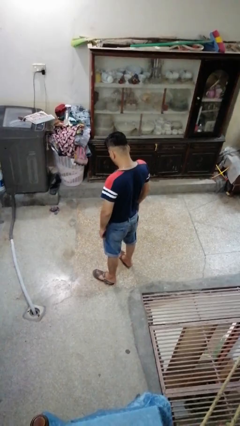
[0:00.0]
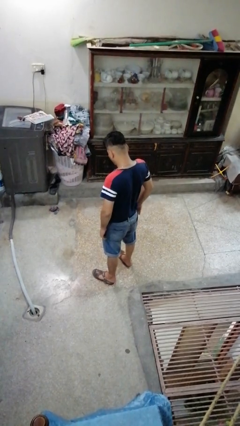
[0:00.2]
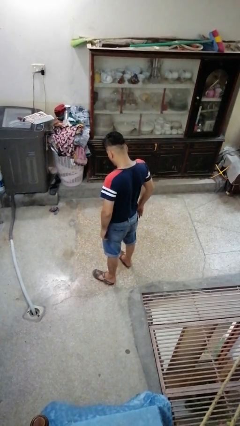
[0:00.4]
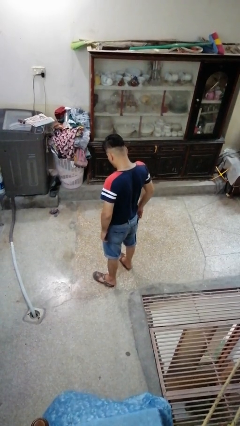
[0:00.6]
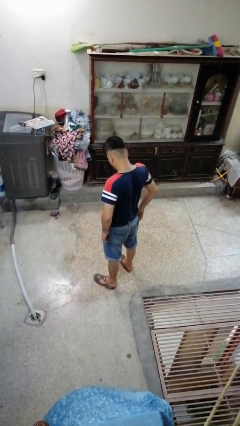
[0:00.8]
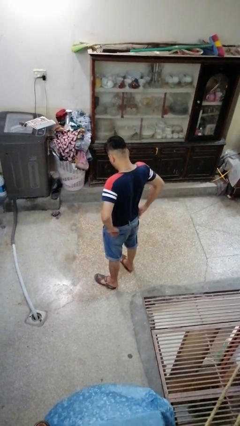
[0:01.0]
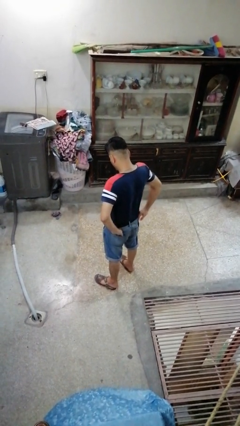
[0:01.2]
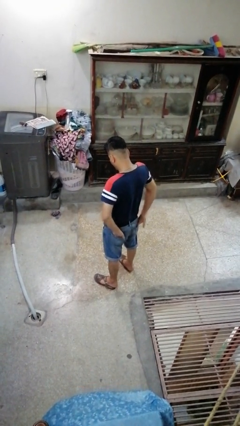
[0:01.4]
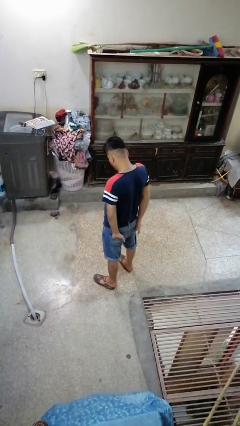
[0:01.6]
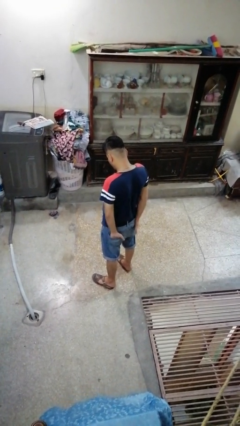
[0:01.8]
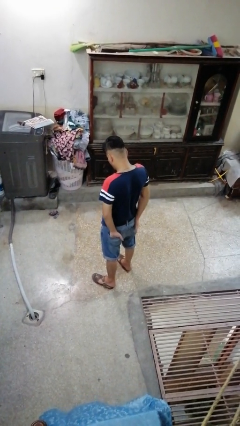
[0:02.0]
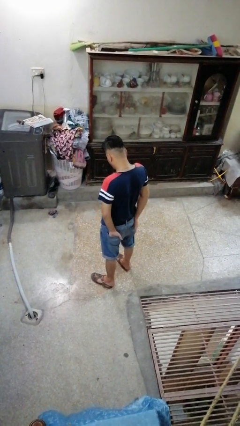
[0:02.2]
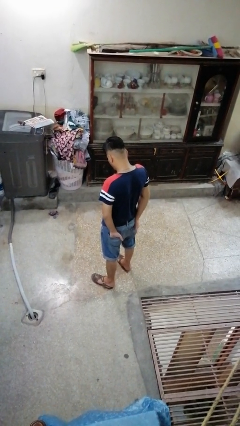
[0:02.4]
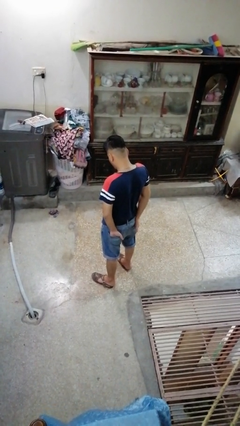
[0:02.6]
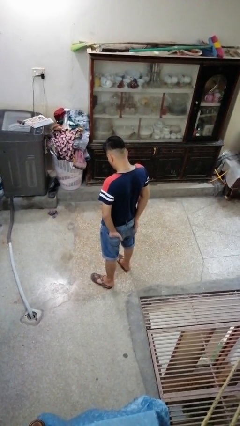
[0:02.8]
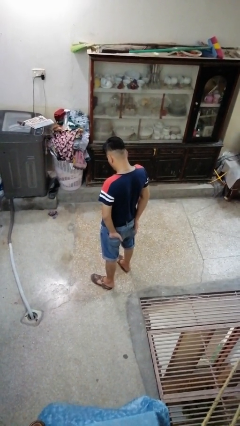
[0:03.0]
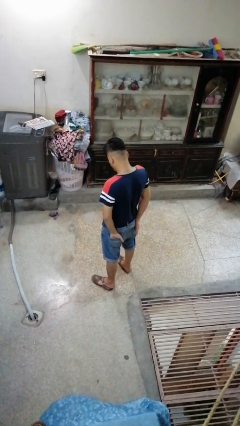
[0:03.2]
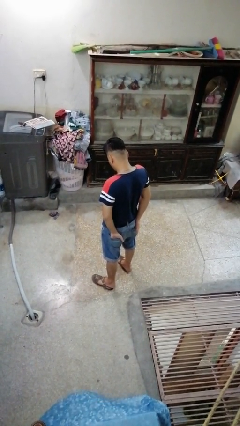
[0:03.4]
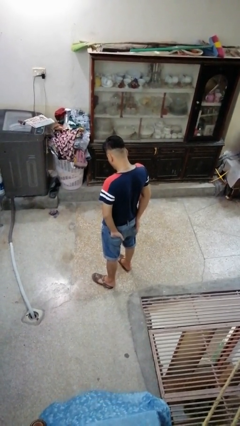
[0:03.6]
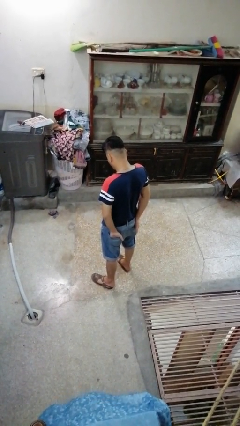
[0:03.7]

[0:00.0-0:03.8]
person puts hands in back pockets

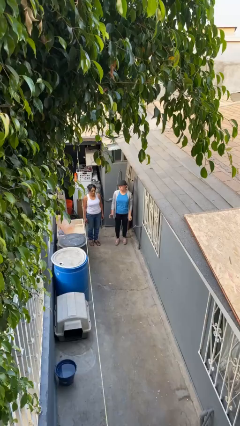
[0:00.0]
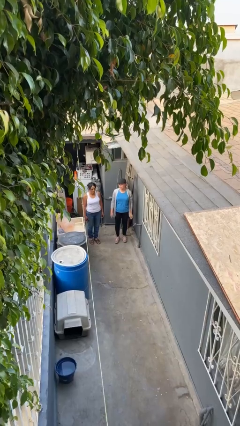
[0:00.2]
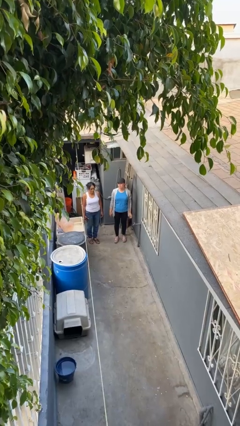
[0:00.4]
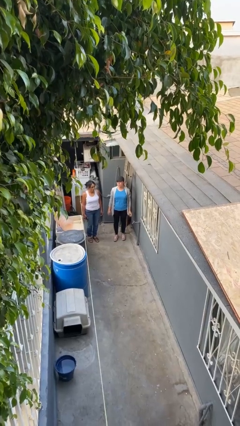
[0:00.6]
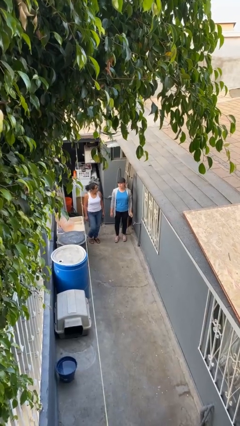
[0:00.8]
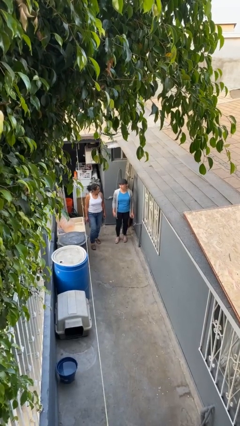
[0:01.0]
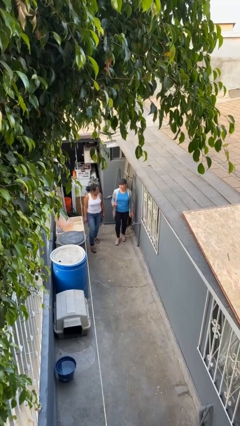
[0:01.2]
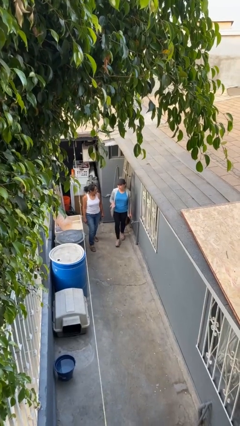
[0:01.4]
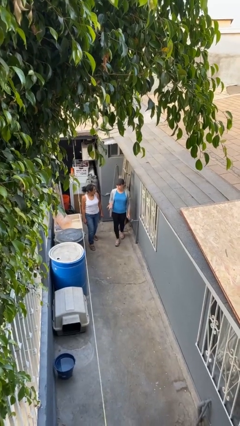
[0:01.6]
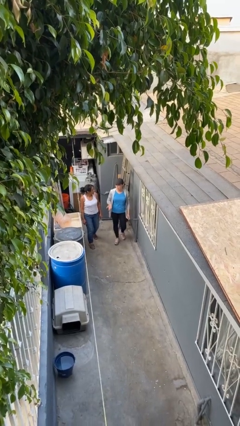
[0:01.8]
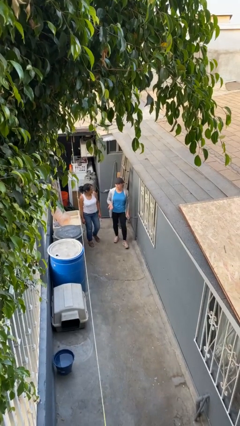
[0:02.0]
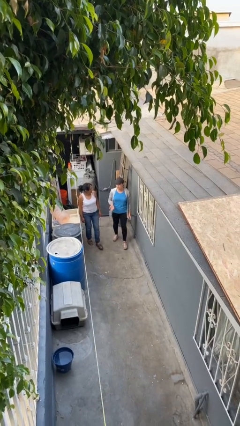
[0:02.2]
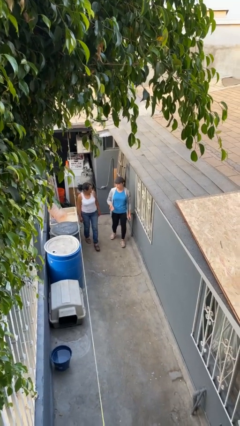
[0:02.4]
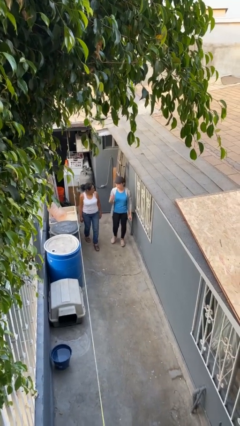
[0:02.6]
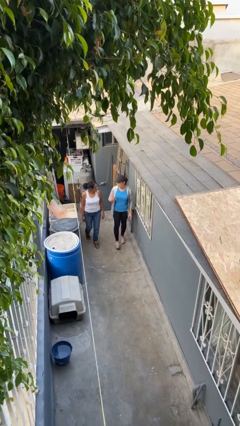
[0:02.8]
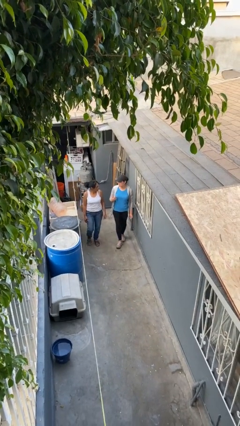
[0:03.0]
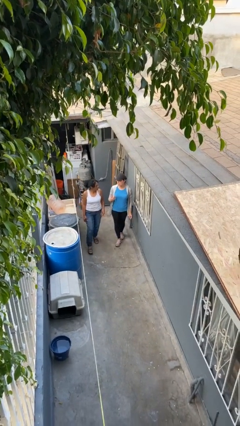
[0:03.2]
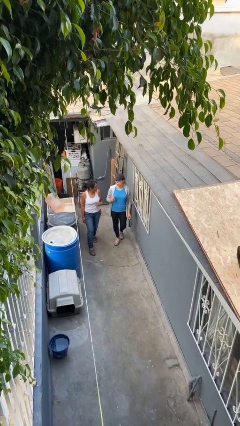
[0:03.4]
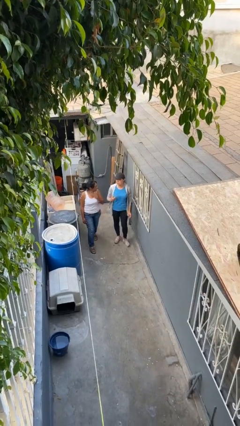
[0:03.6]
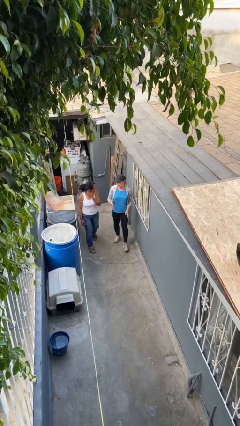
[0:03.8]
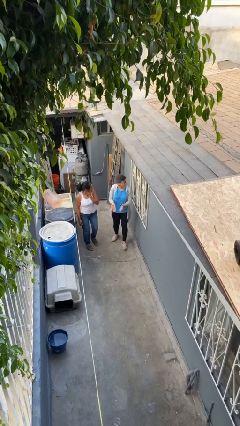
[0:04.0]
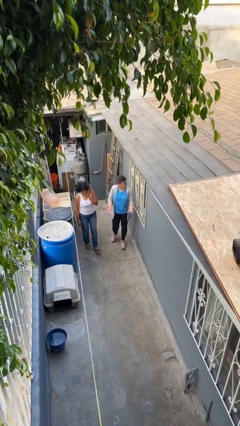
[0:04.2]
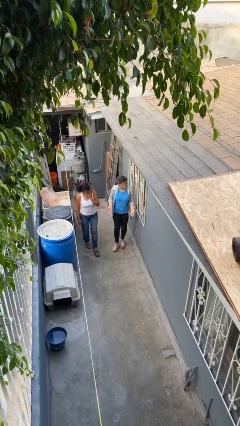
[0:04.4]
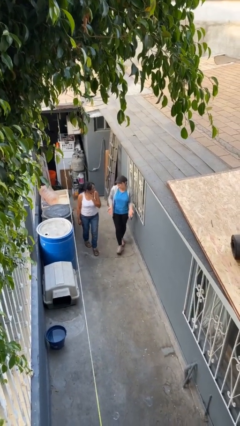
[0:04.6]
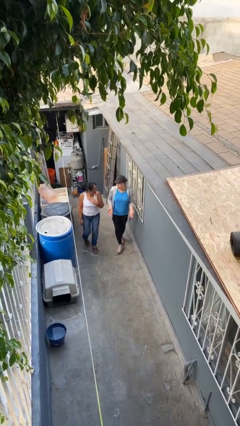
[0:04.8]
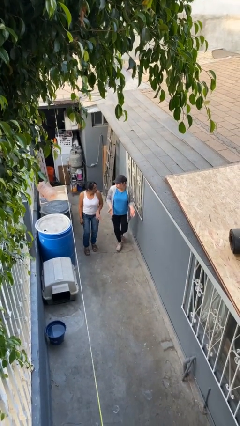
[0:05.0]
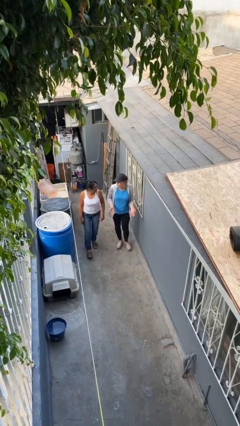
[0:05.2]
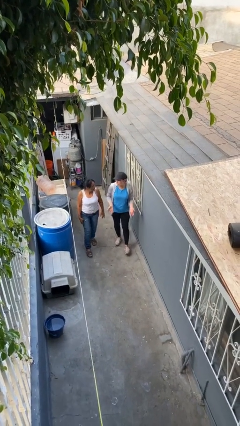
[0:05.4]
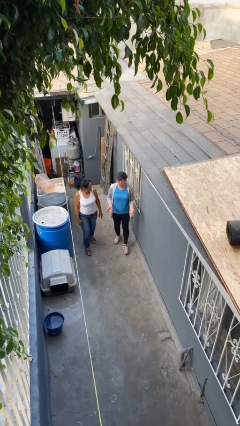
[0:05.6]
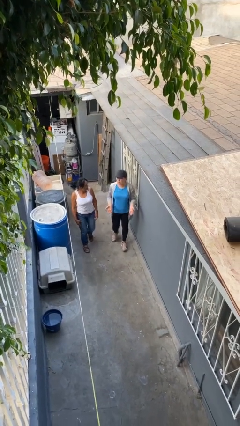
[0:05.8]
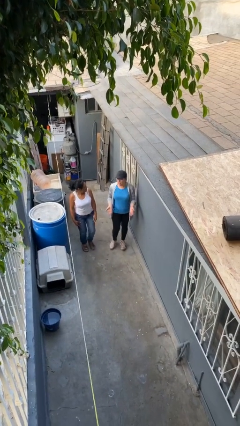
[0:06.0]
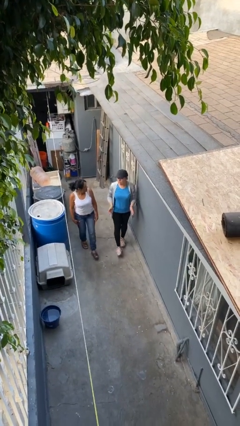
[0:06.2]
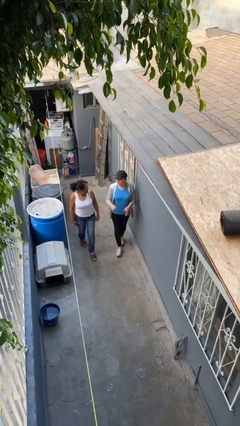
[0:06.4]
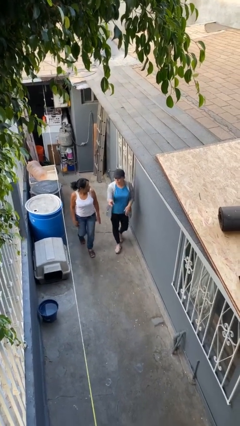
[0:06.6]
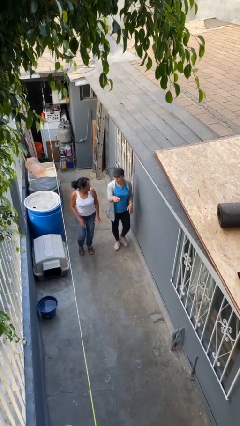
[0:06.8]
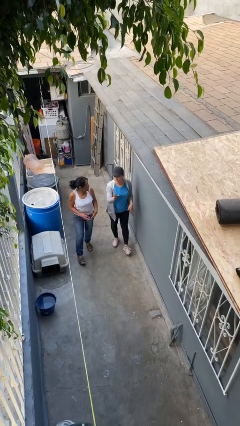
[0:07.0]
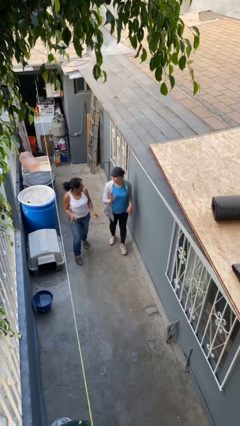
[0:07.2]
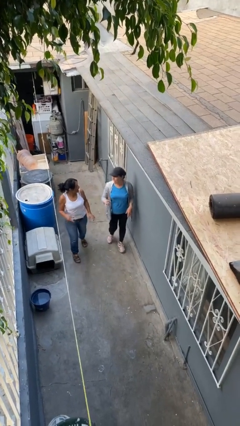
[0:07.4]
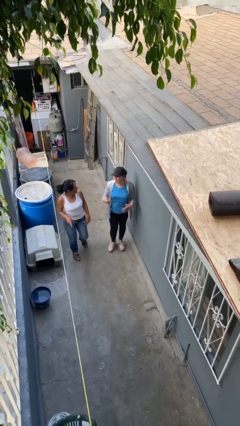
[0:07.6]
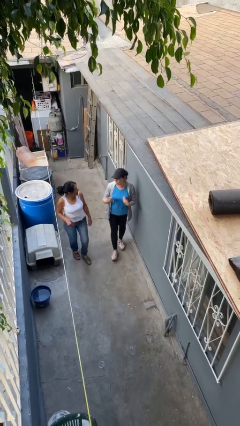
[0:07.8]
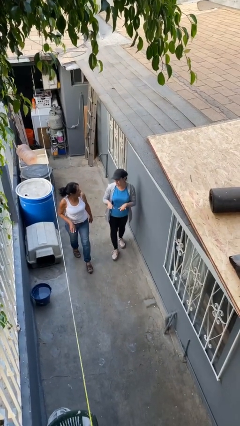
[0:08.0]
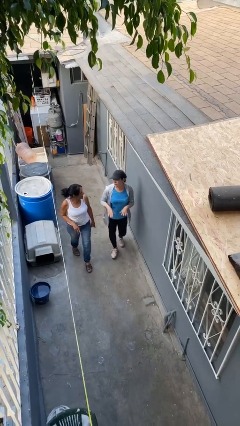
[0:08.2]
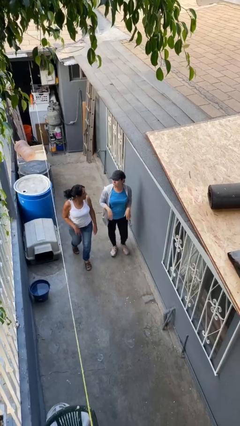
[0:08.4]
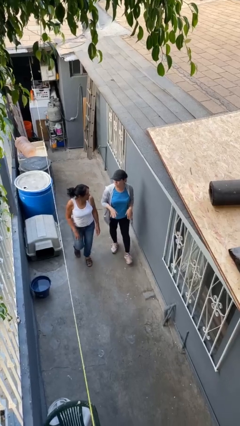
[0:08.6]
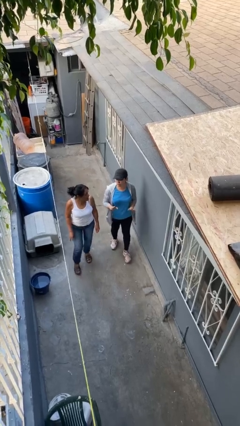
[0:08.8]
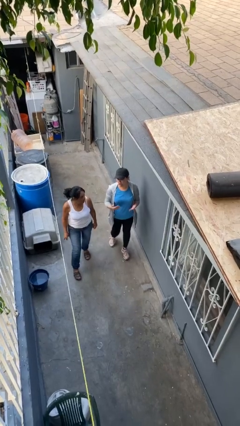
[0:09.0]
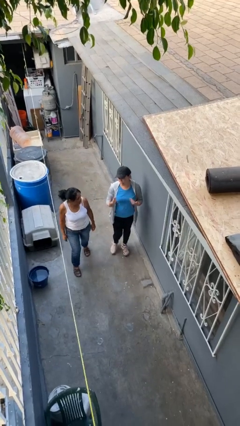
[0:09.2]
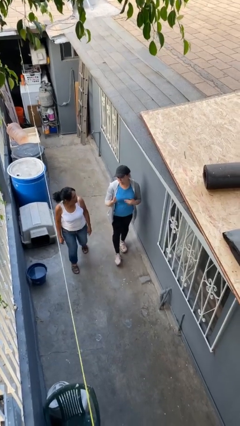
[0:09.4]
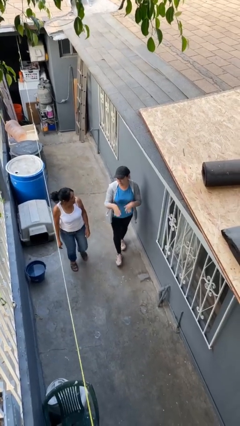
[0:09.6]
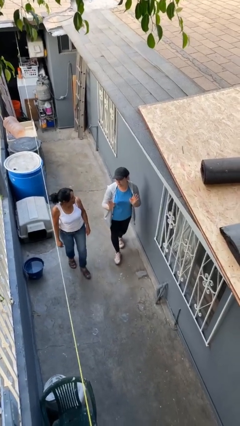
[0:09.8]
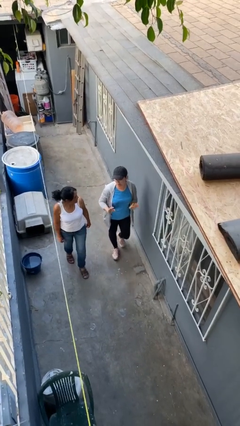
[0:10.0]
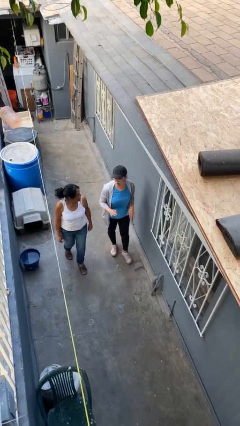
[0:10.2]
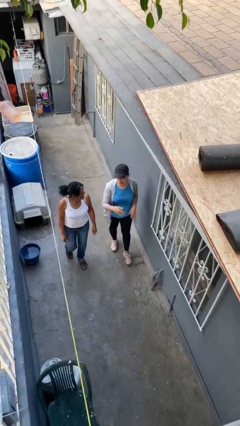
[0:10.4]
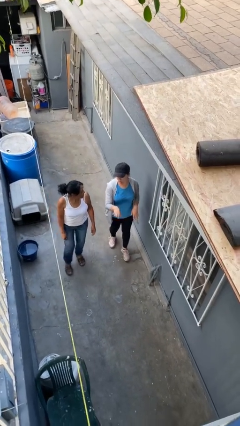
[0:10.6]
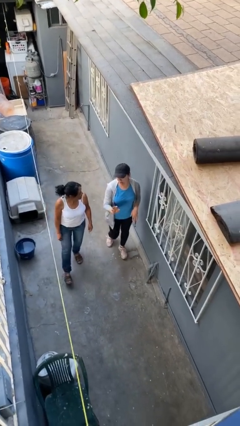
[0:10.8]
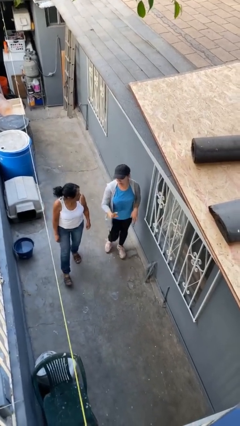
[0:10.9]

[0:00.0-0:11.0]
person talks to person

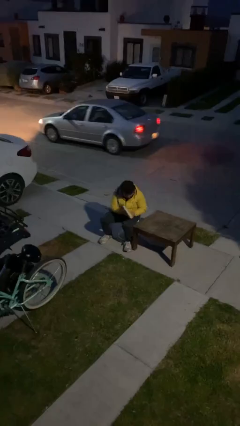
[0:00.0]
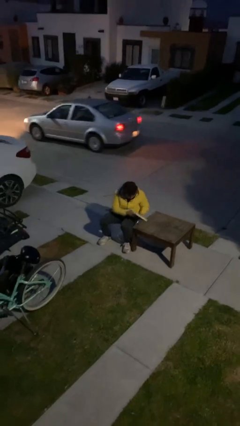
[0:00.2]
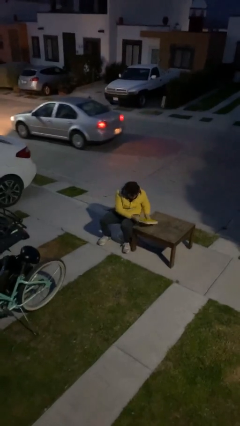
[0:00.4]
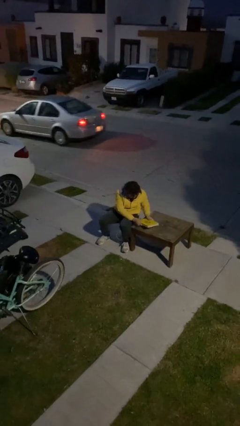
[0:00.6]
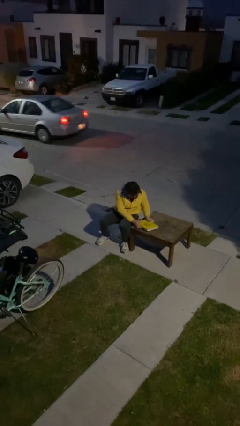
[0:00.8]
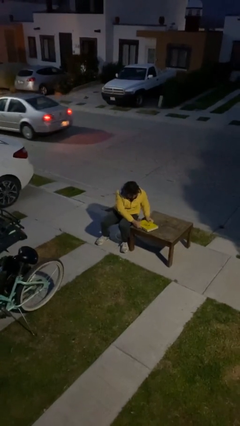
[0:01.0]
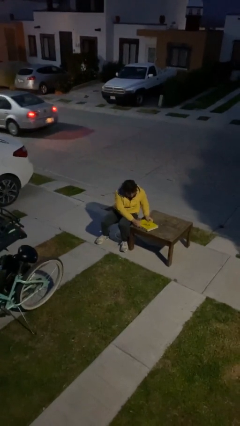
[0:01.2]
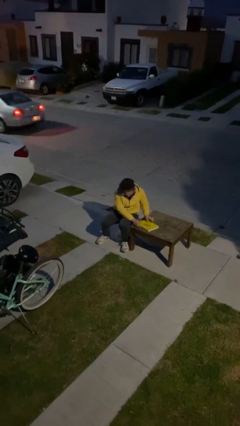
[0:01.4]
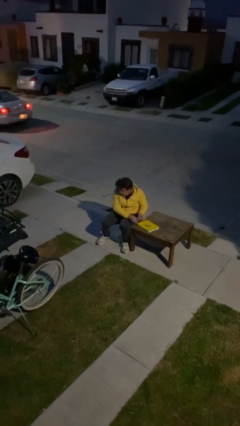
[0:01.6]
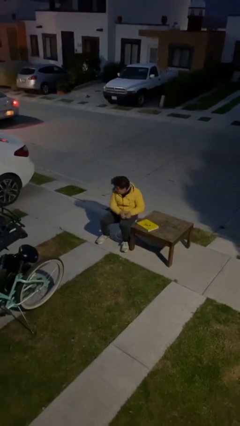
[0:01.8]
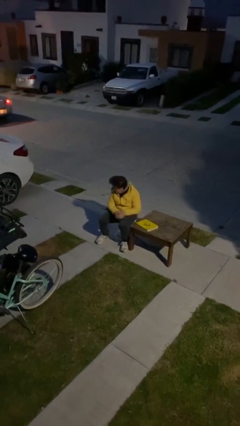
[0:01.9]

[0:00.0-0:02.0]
person puts down object on table

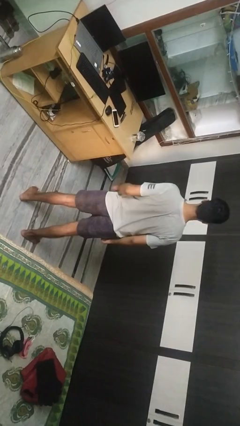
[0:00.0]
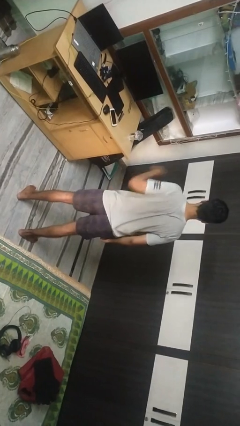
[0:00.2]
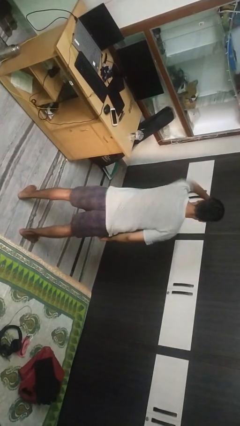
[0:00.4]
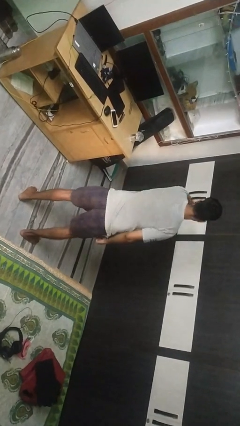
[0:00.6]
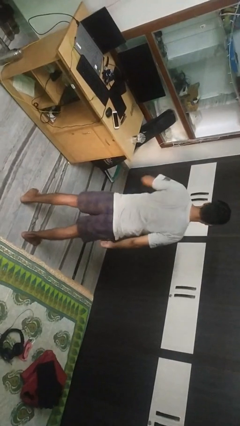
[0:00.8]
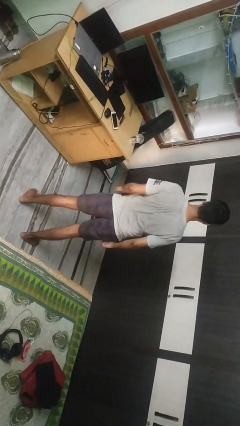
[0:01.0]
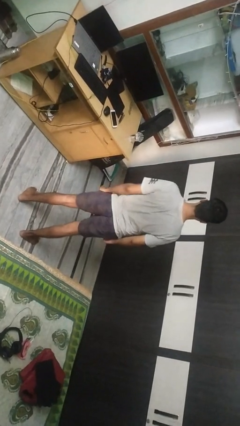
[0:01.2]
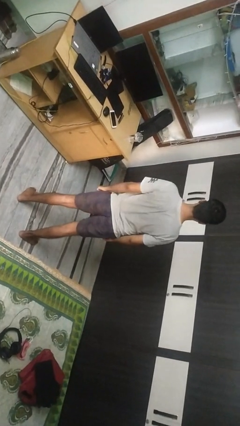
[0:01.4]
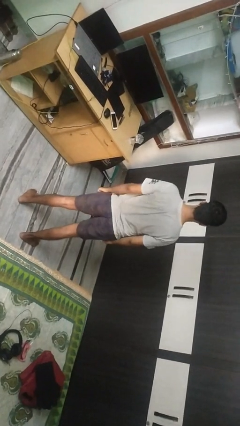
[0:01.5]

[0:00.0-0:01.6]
person punches
